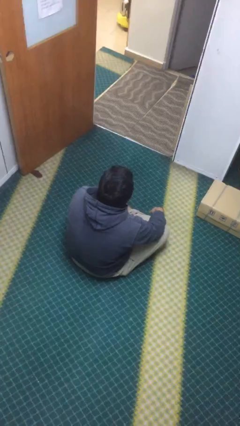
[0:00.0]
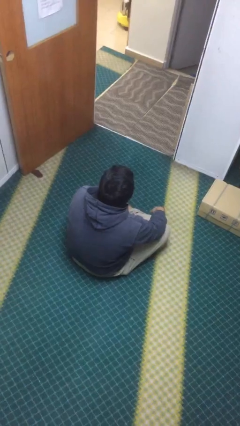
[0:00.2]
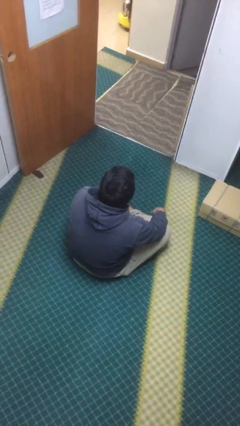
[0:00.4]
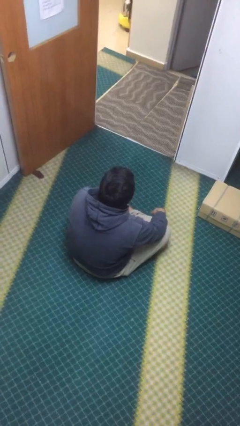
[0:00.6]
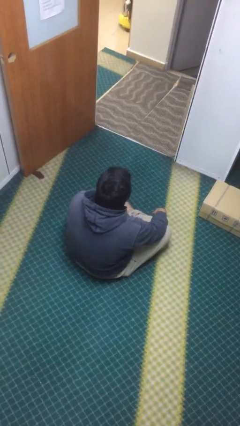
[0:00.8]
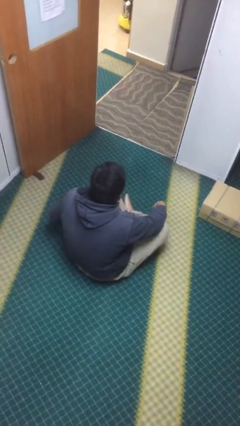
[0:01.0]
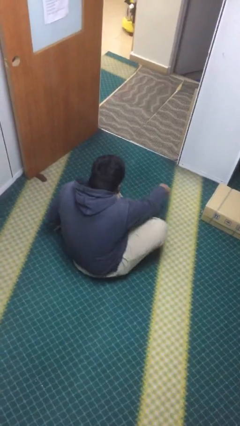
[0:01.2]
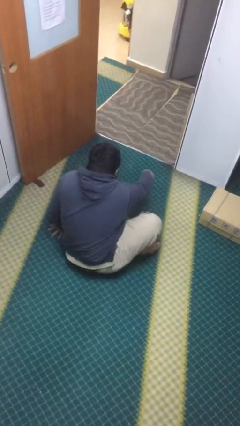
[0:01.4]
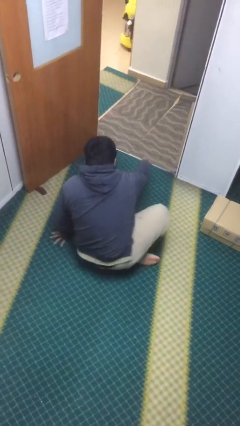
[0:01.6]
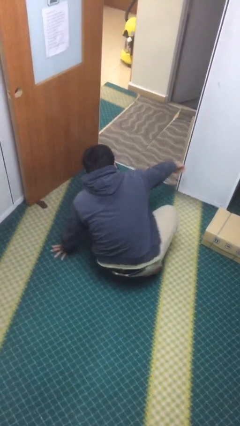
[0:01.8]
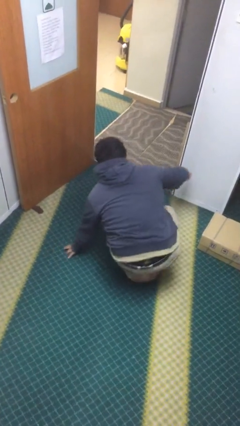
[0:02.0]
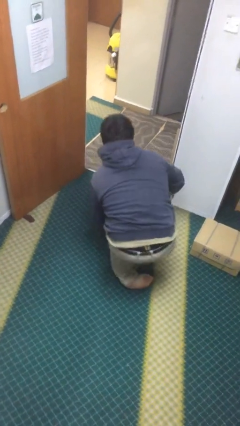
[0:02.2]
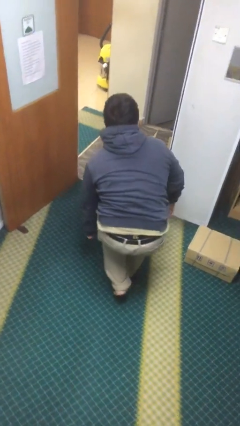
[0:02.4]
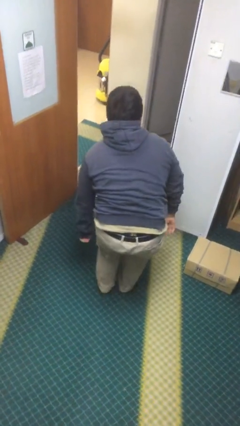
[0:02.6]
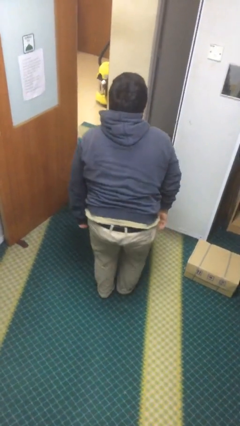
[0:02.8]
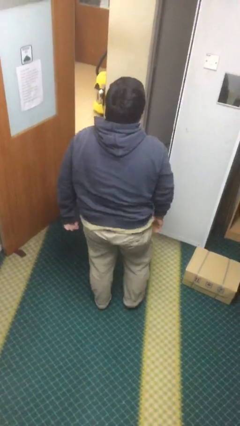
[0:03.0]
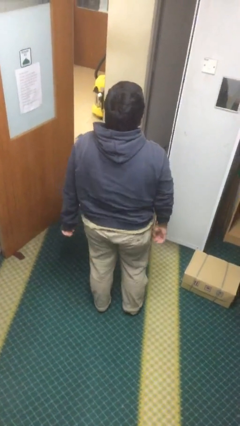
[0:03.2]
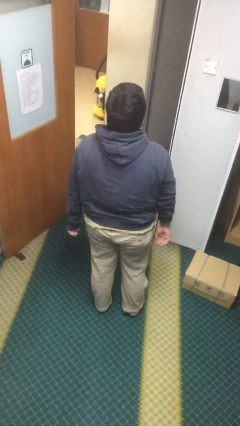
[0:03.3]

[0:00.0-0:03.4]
person stands up from floor

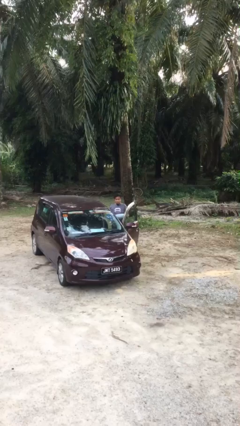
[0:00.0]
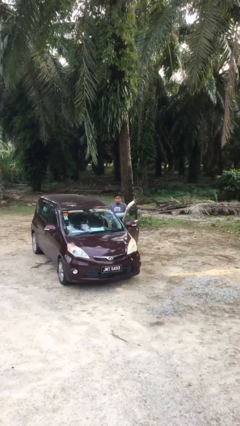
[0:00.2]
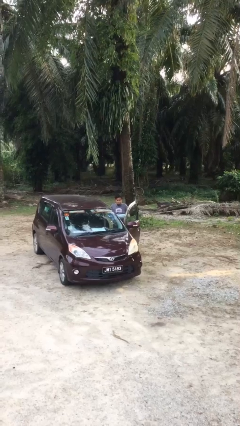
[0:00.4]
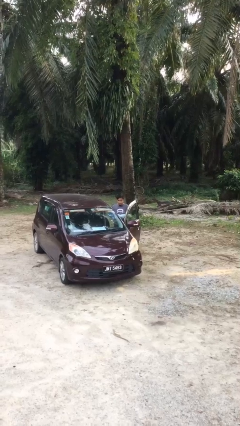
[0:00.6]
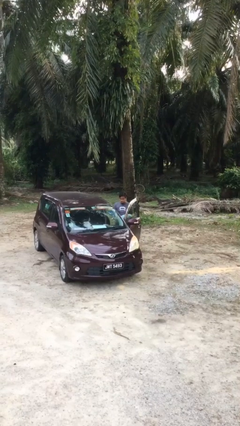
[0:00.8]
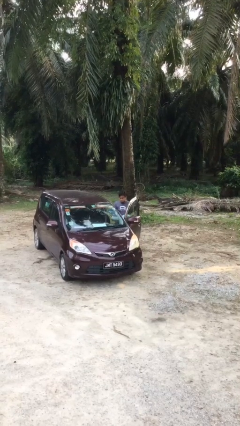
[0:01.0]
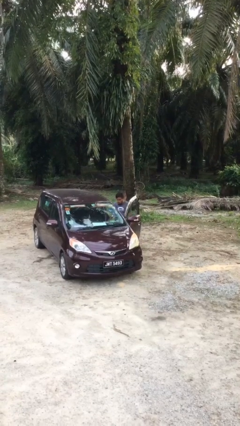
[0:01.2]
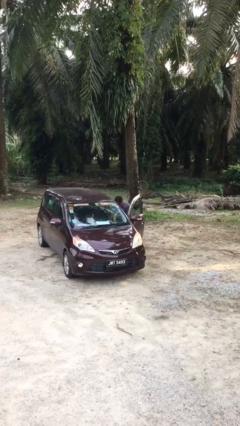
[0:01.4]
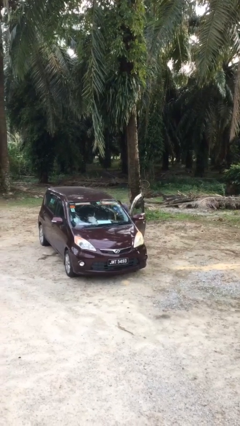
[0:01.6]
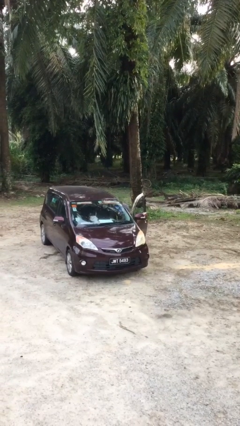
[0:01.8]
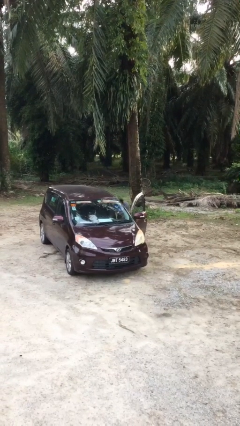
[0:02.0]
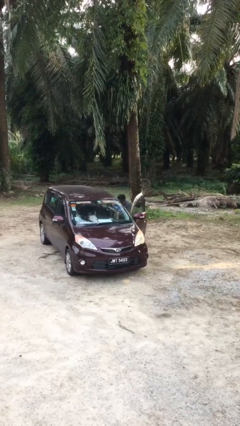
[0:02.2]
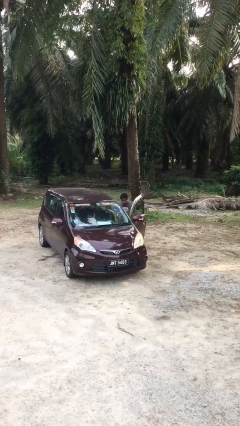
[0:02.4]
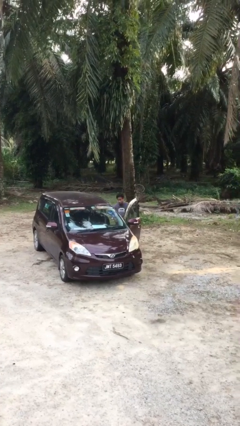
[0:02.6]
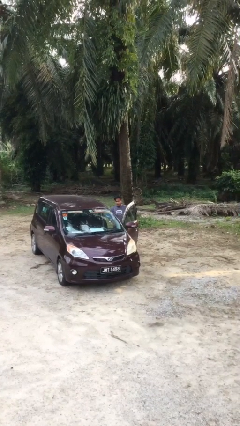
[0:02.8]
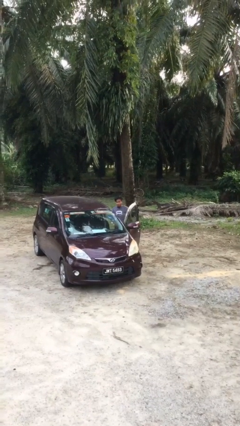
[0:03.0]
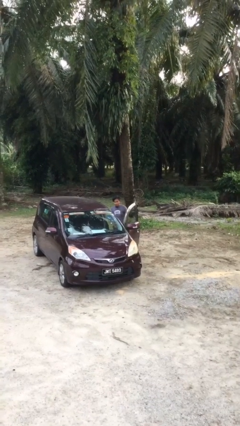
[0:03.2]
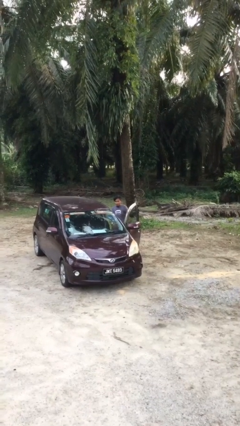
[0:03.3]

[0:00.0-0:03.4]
person loads car

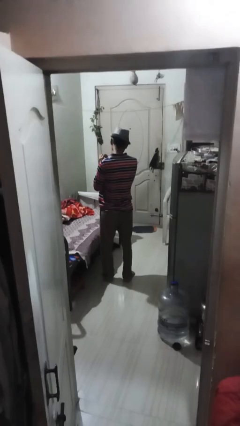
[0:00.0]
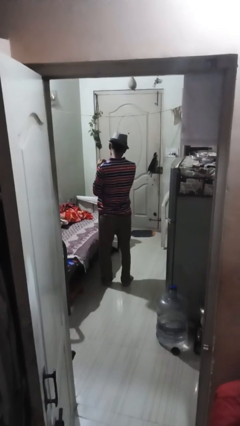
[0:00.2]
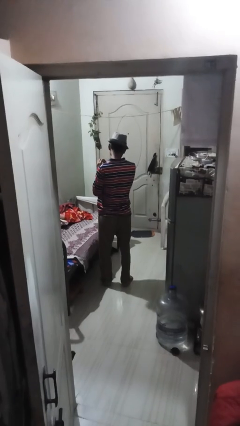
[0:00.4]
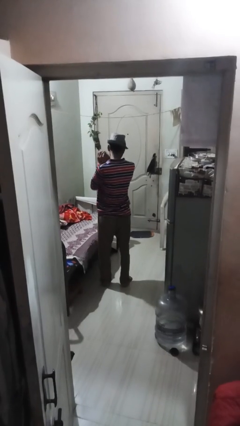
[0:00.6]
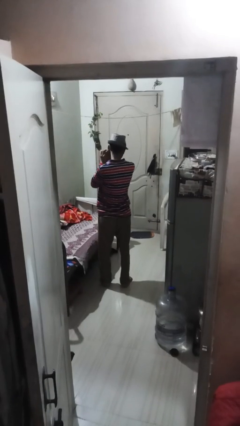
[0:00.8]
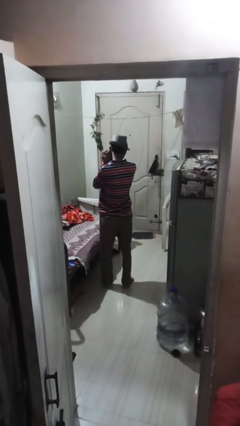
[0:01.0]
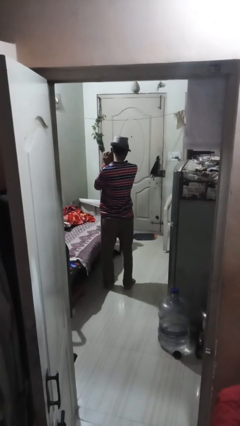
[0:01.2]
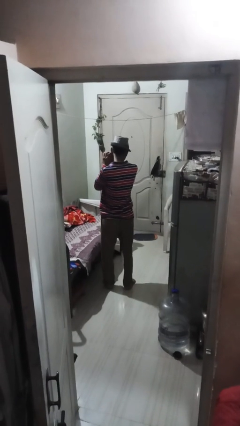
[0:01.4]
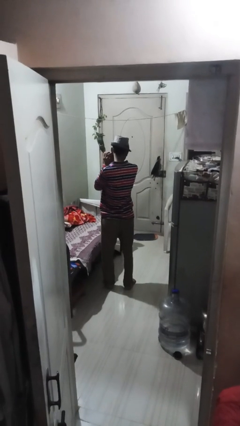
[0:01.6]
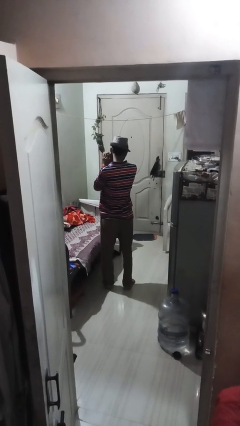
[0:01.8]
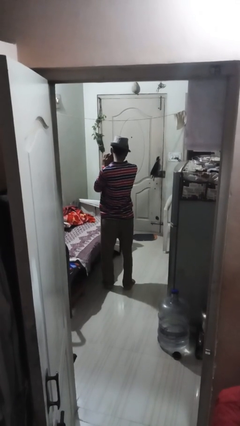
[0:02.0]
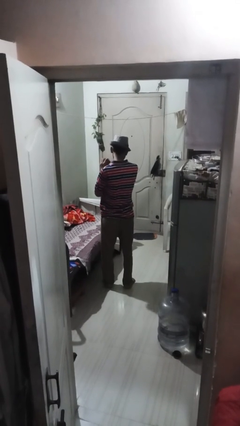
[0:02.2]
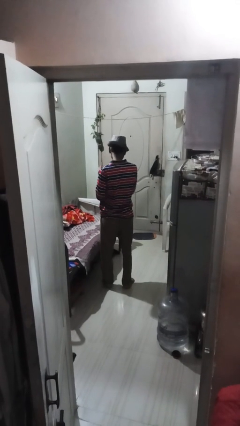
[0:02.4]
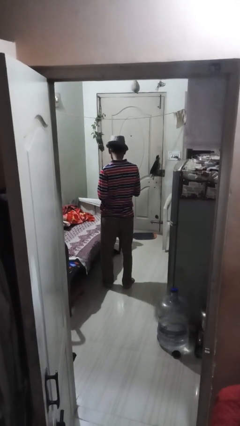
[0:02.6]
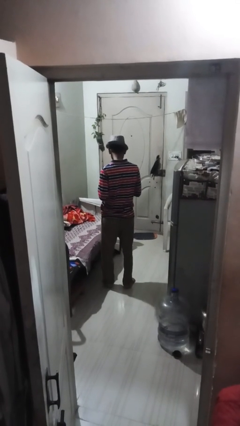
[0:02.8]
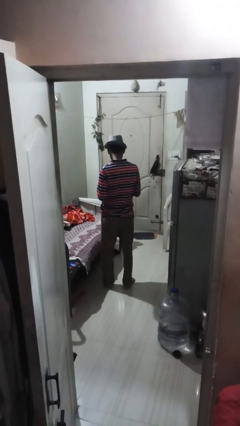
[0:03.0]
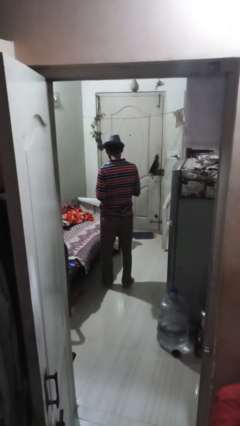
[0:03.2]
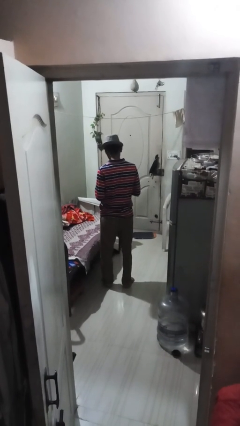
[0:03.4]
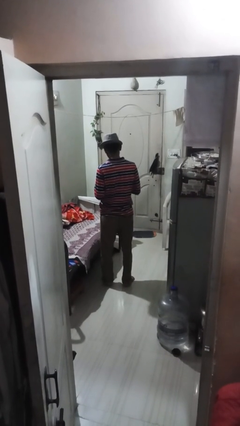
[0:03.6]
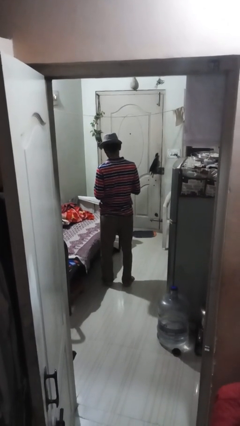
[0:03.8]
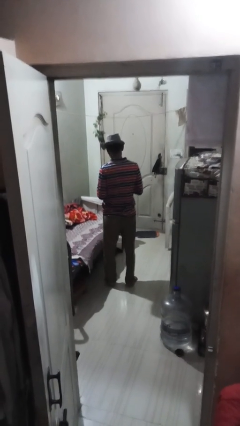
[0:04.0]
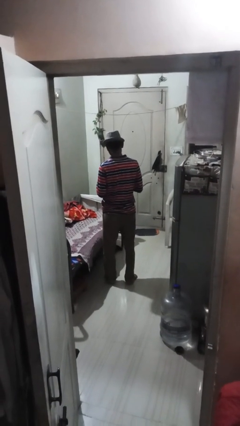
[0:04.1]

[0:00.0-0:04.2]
person takes off earrings

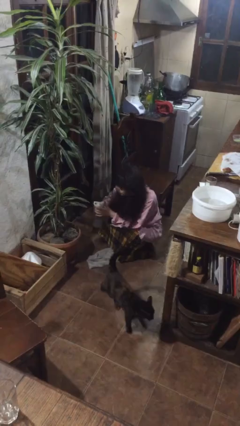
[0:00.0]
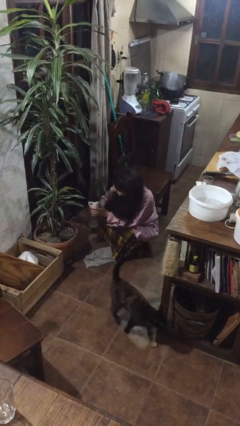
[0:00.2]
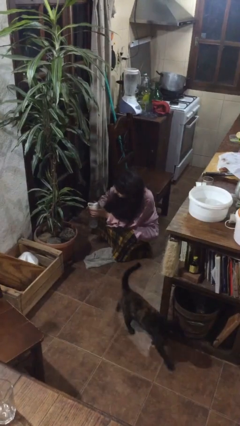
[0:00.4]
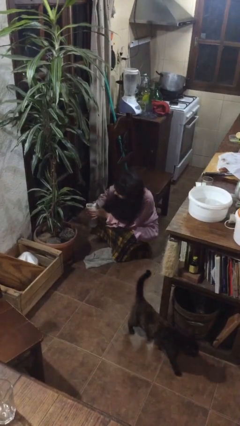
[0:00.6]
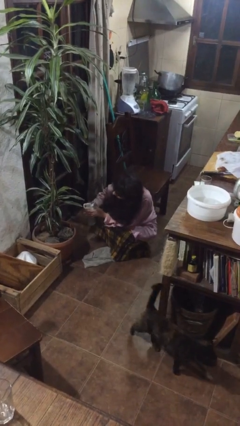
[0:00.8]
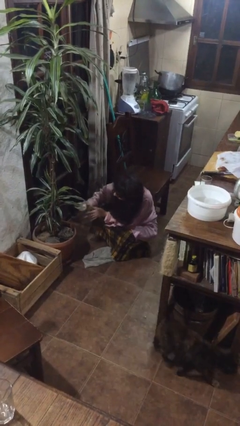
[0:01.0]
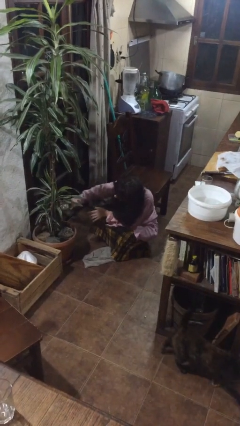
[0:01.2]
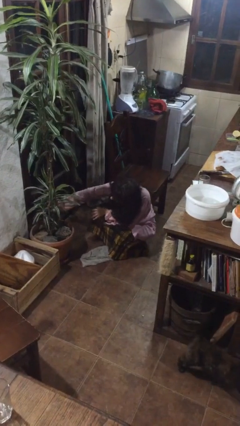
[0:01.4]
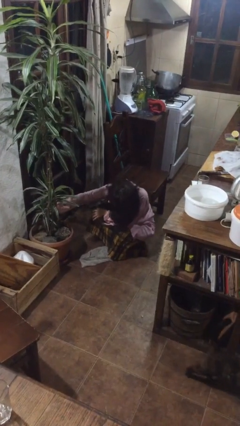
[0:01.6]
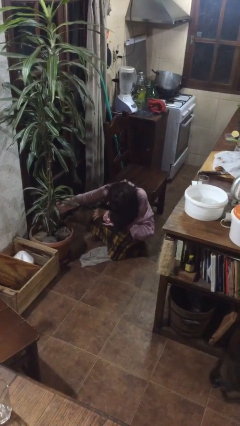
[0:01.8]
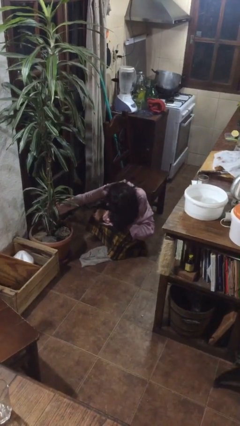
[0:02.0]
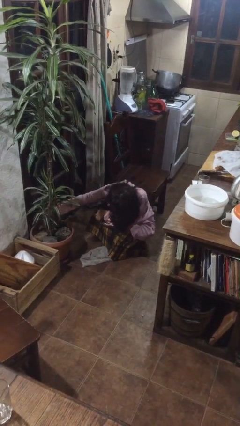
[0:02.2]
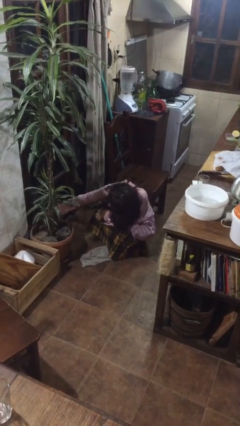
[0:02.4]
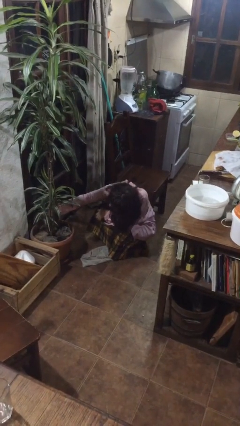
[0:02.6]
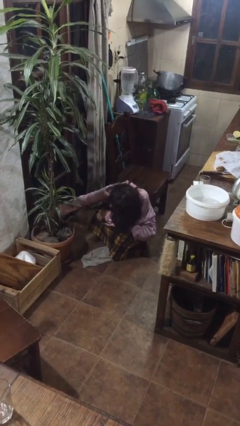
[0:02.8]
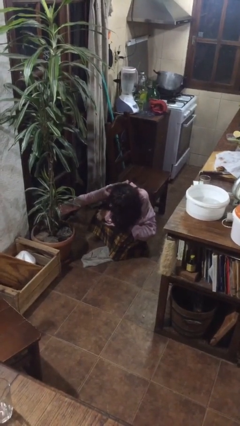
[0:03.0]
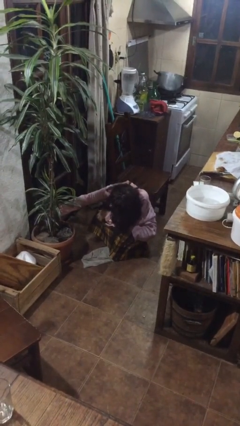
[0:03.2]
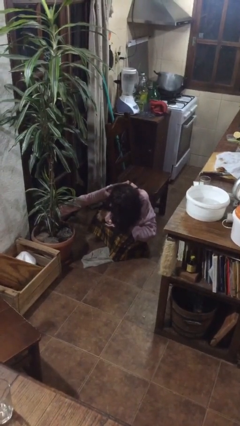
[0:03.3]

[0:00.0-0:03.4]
person waters houseplant

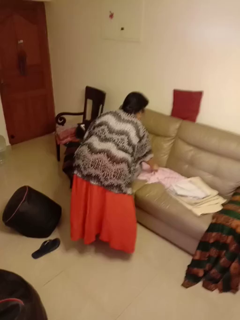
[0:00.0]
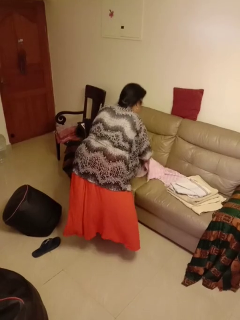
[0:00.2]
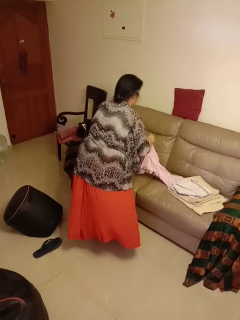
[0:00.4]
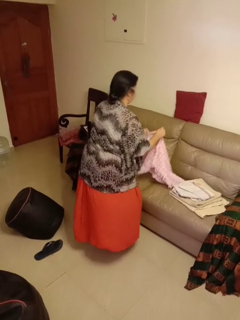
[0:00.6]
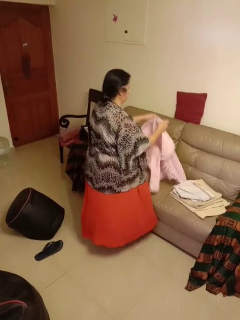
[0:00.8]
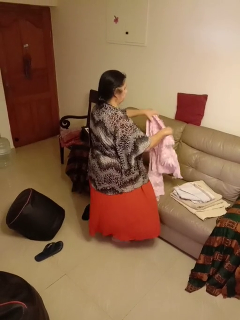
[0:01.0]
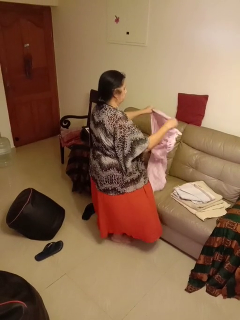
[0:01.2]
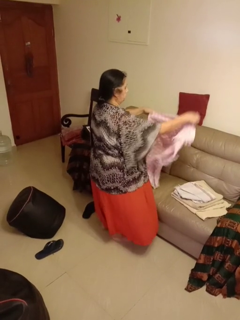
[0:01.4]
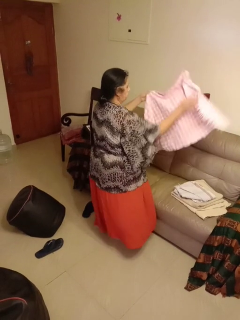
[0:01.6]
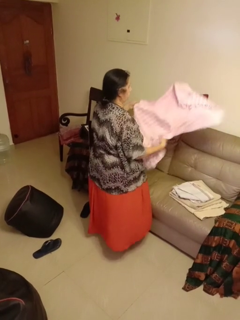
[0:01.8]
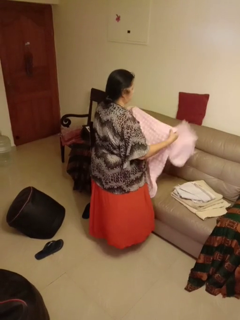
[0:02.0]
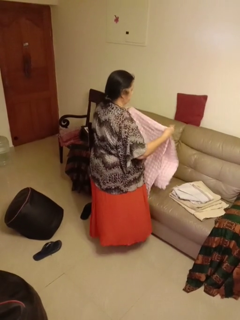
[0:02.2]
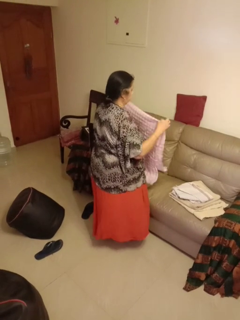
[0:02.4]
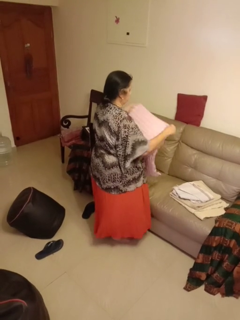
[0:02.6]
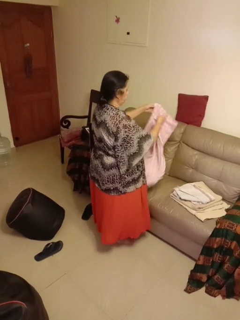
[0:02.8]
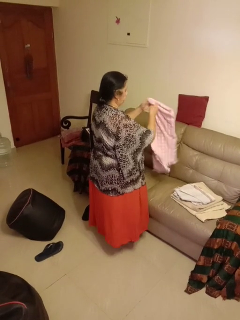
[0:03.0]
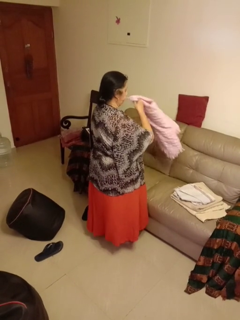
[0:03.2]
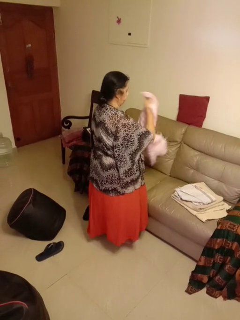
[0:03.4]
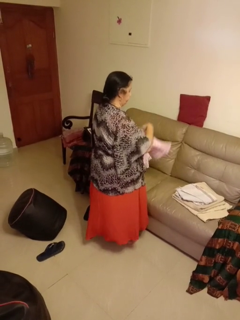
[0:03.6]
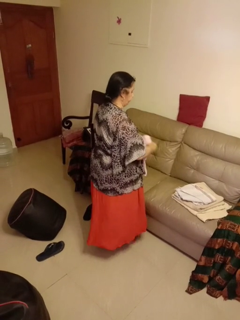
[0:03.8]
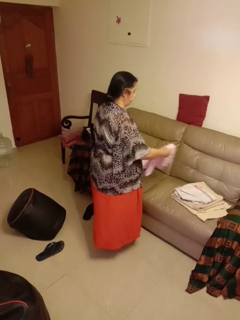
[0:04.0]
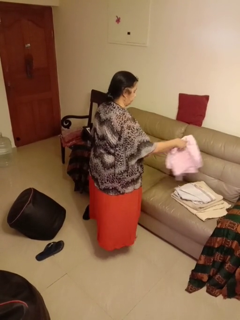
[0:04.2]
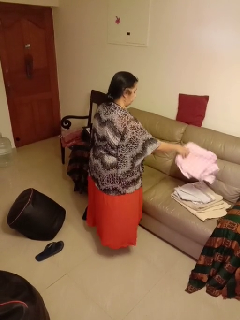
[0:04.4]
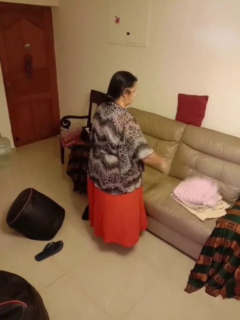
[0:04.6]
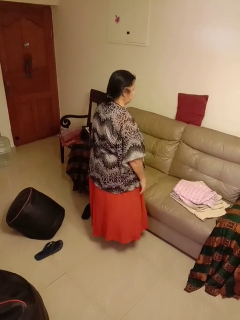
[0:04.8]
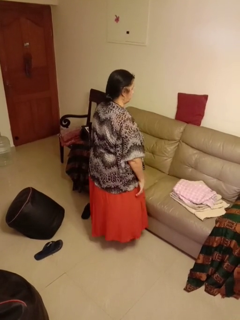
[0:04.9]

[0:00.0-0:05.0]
person folds towel
